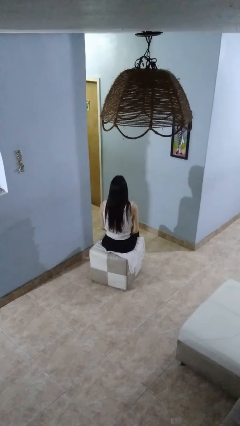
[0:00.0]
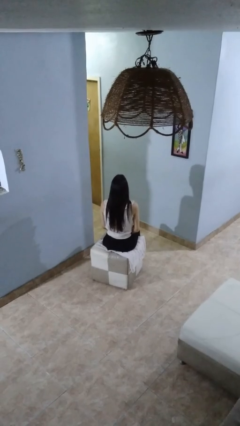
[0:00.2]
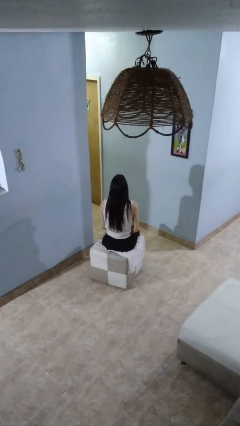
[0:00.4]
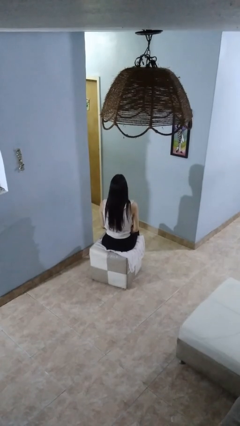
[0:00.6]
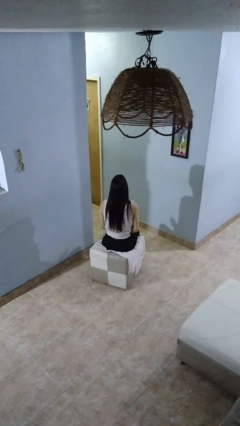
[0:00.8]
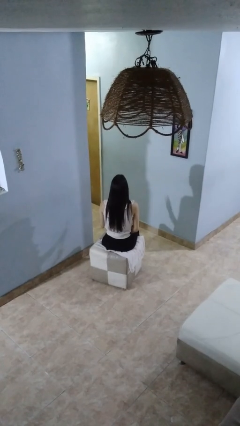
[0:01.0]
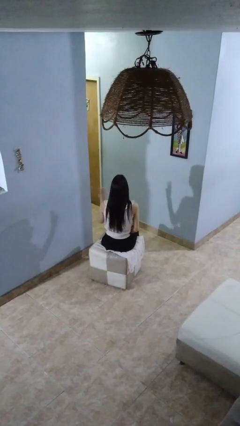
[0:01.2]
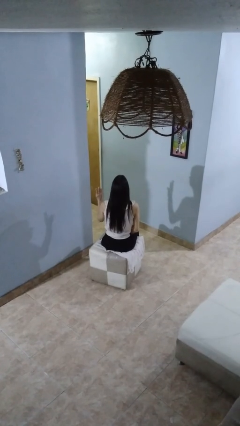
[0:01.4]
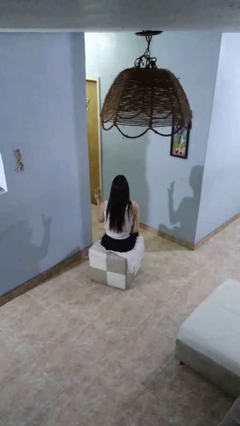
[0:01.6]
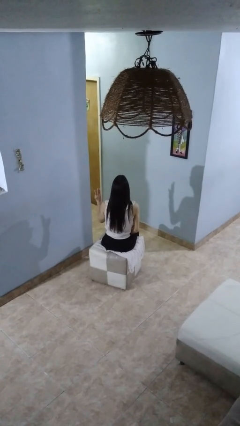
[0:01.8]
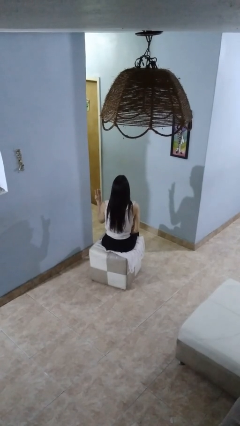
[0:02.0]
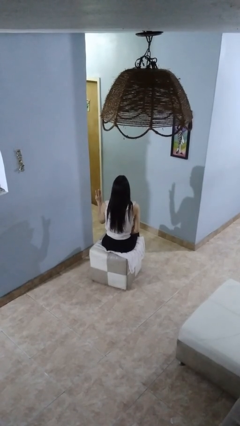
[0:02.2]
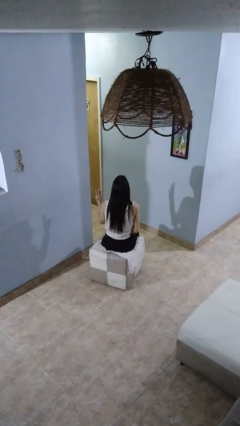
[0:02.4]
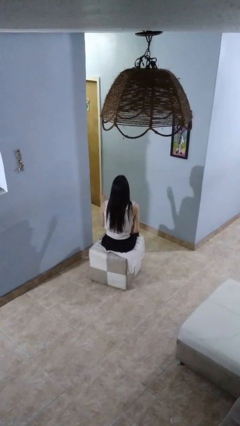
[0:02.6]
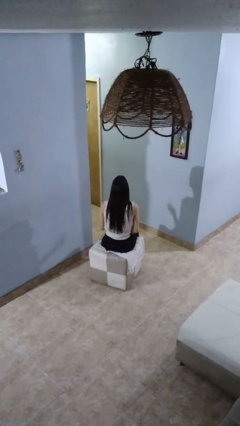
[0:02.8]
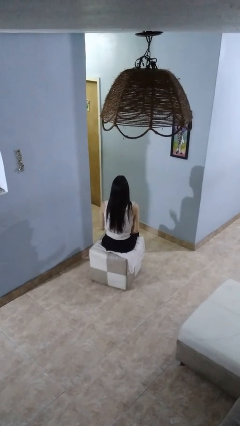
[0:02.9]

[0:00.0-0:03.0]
person gestures number three

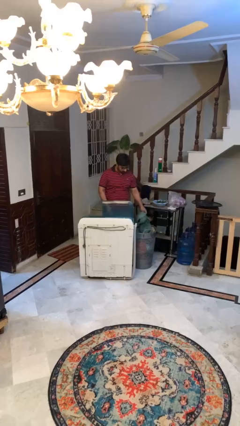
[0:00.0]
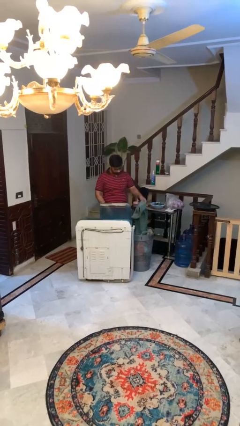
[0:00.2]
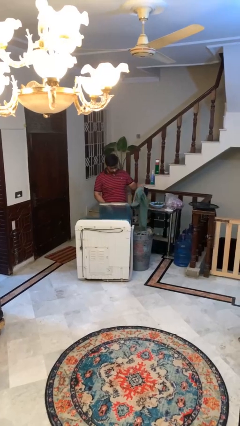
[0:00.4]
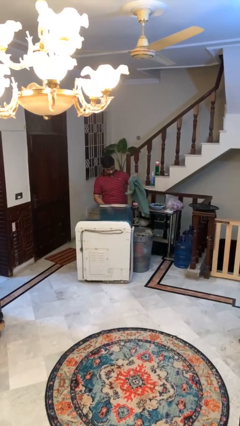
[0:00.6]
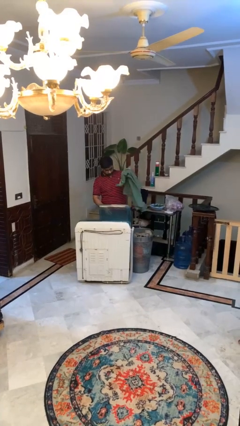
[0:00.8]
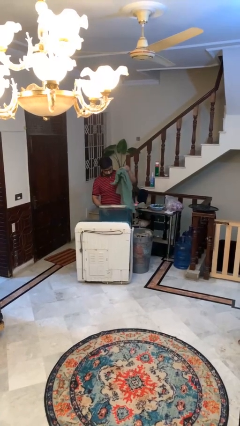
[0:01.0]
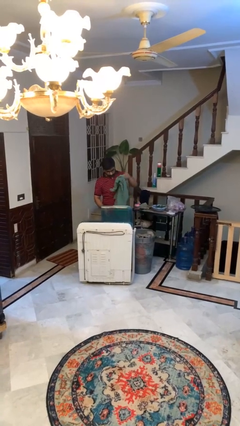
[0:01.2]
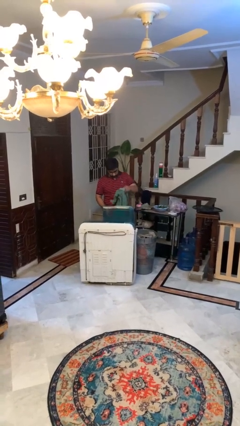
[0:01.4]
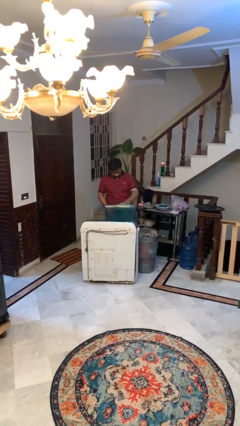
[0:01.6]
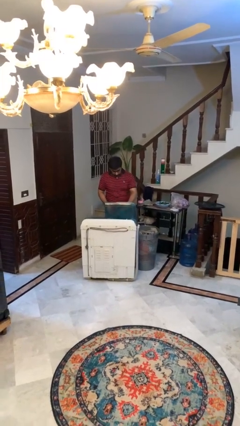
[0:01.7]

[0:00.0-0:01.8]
person loads clotheswasher

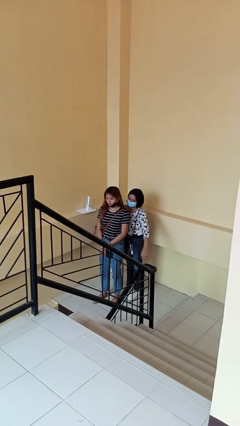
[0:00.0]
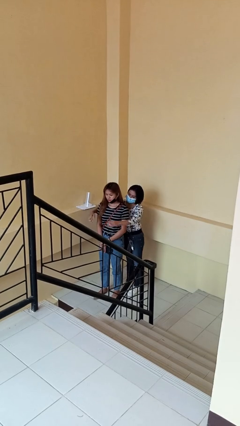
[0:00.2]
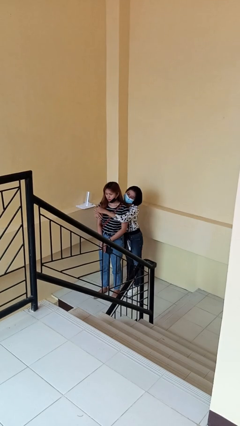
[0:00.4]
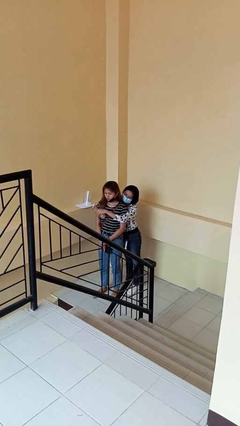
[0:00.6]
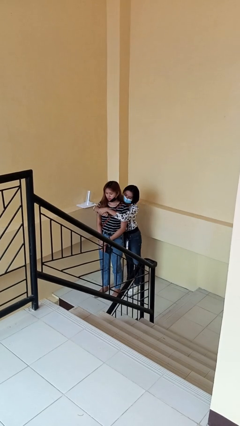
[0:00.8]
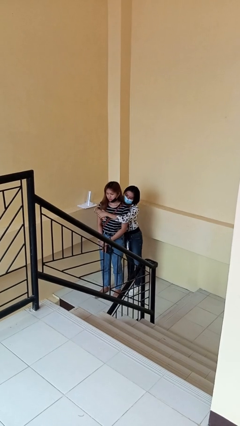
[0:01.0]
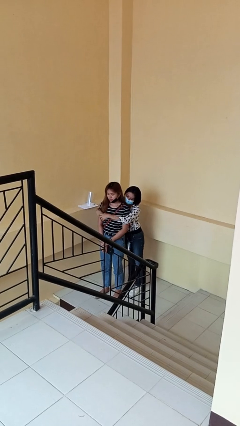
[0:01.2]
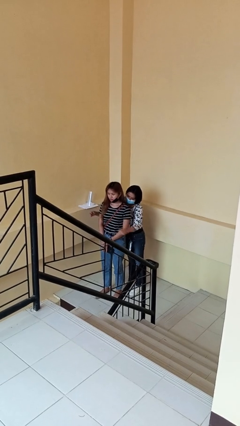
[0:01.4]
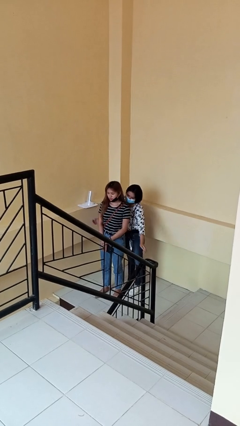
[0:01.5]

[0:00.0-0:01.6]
person hugs person from behind

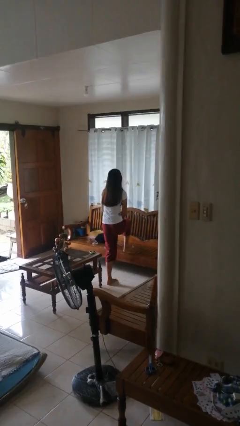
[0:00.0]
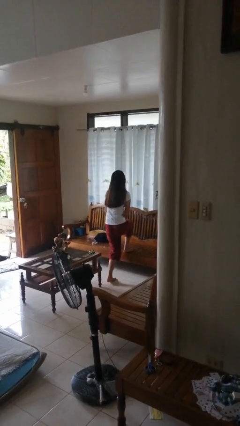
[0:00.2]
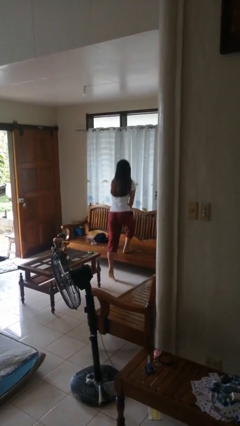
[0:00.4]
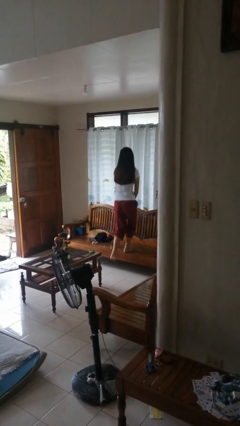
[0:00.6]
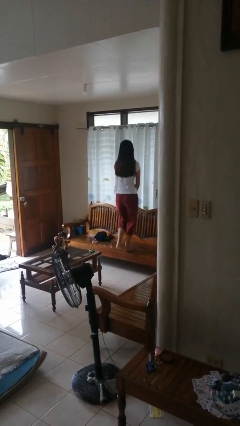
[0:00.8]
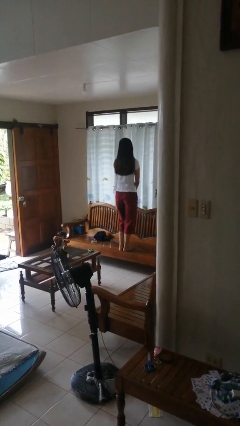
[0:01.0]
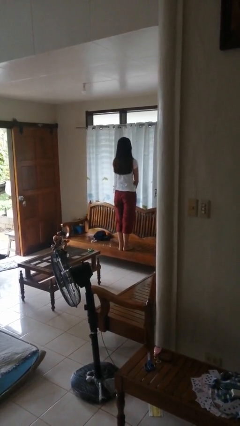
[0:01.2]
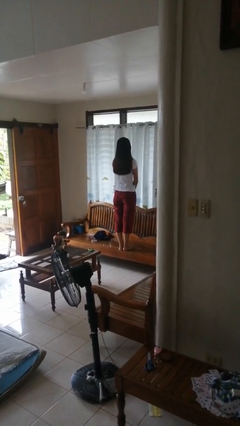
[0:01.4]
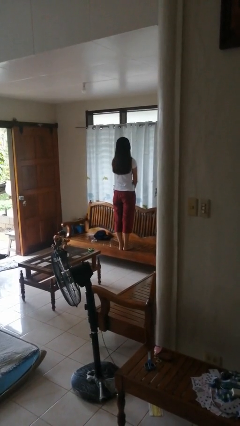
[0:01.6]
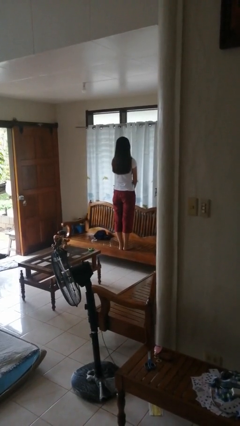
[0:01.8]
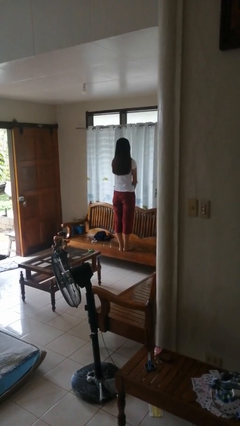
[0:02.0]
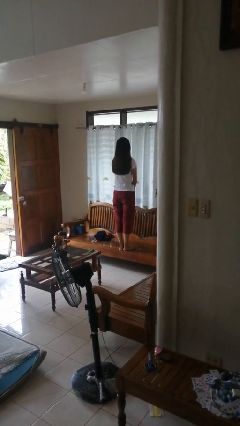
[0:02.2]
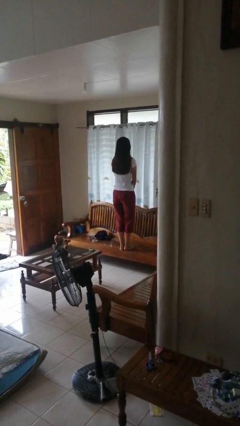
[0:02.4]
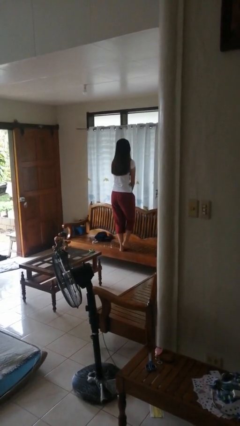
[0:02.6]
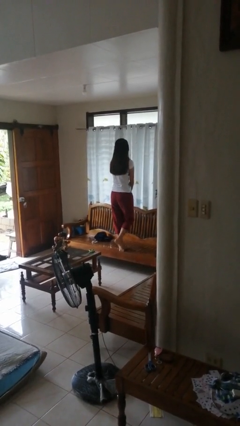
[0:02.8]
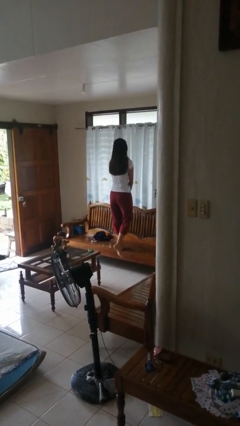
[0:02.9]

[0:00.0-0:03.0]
person climbs on chair

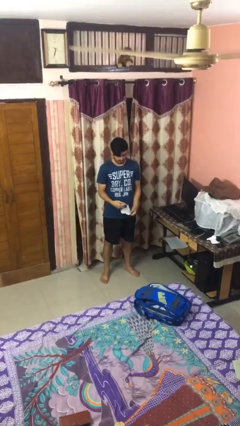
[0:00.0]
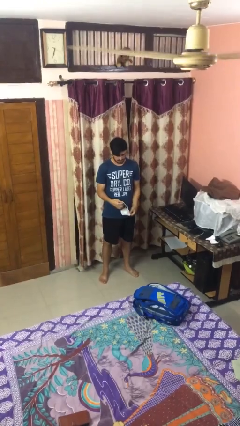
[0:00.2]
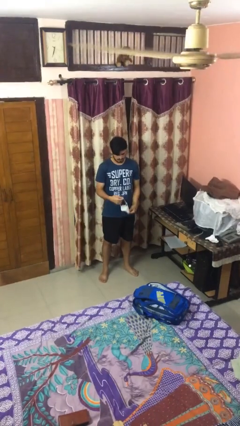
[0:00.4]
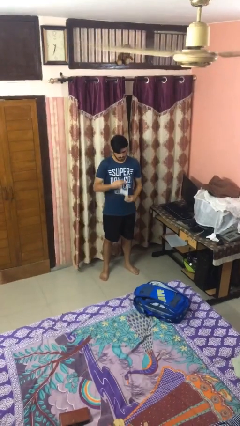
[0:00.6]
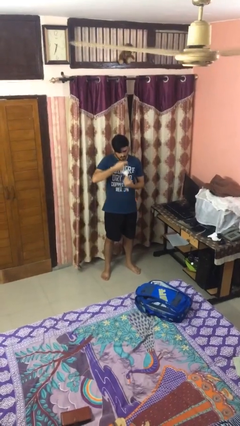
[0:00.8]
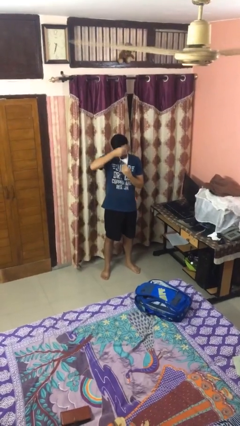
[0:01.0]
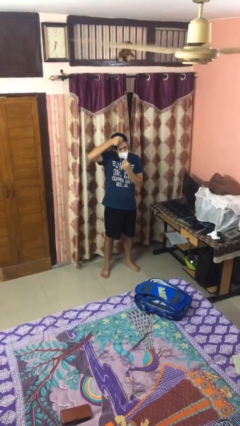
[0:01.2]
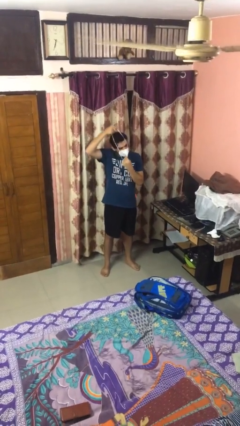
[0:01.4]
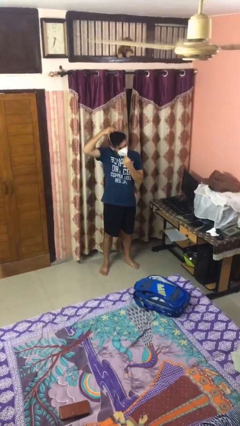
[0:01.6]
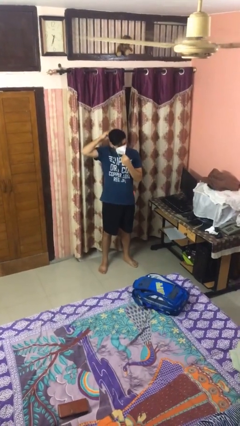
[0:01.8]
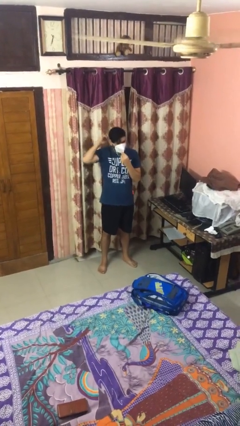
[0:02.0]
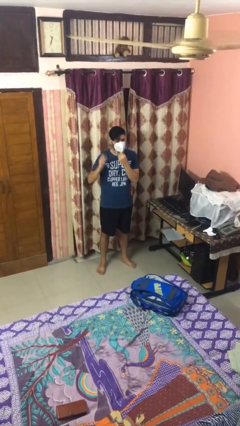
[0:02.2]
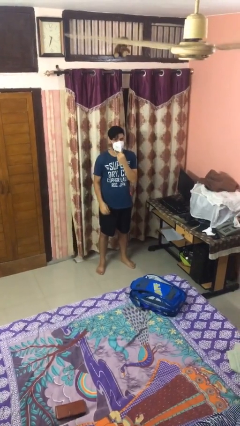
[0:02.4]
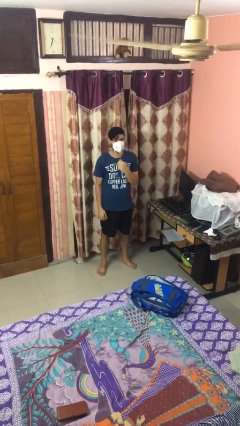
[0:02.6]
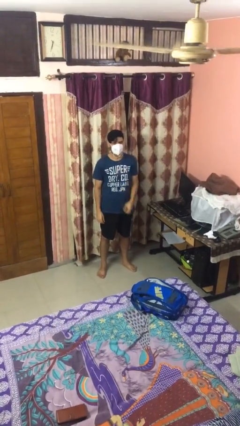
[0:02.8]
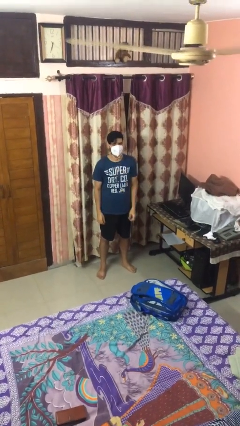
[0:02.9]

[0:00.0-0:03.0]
person puts on facemask

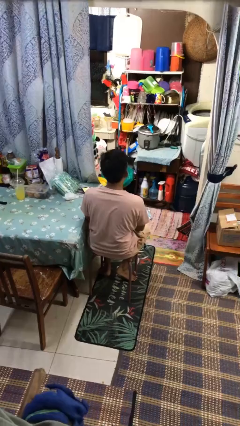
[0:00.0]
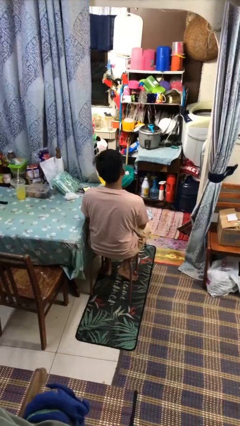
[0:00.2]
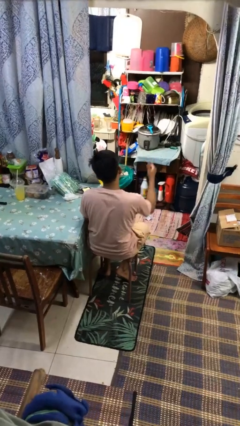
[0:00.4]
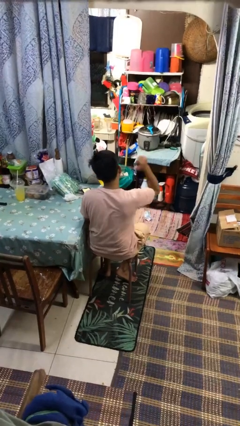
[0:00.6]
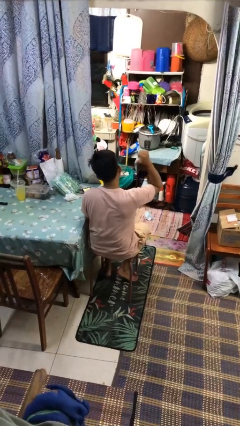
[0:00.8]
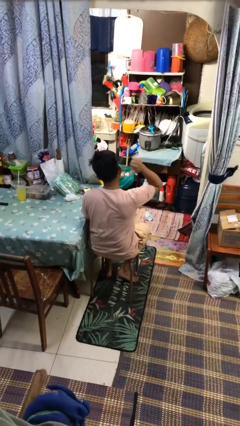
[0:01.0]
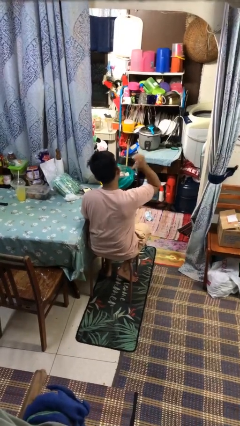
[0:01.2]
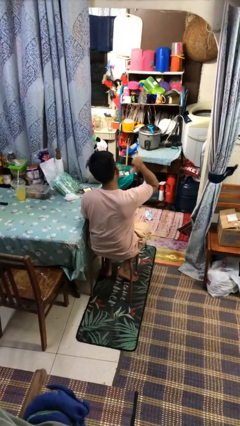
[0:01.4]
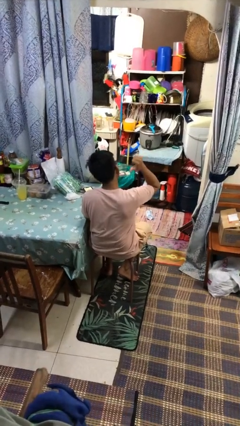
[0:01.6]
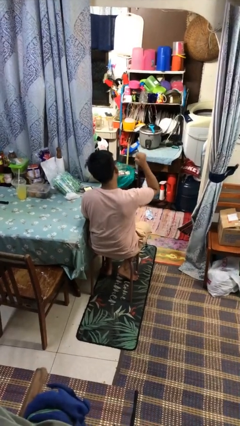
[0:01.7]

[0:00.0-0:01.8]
person gestures behind me

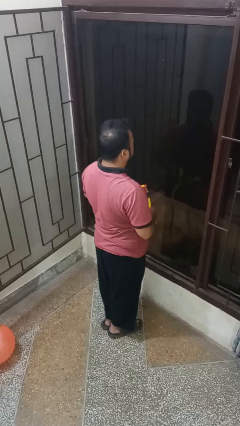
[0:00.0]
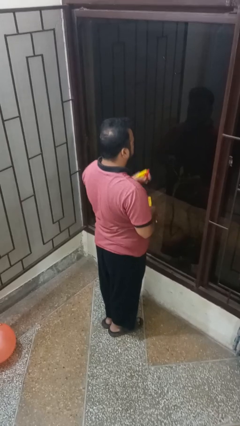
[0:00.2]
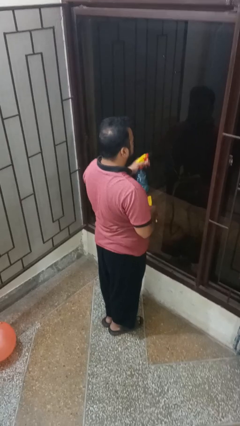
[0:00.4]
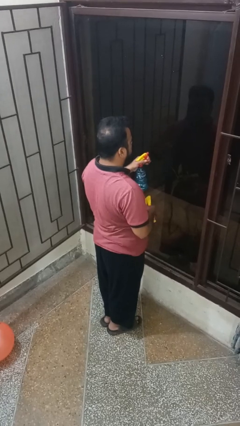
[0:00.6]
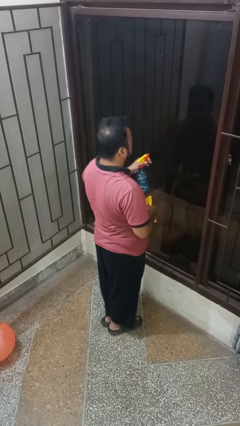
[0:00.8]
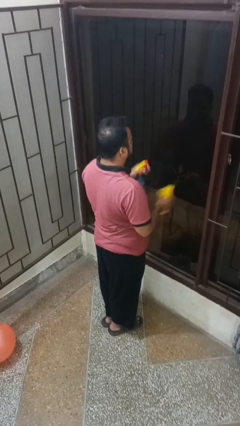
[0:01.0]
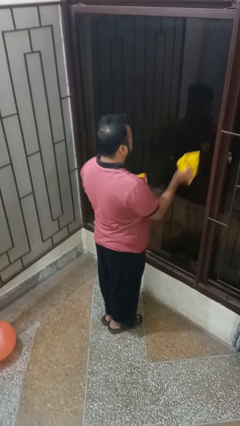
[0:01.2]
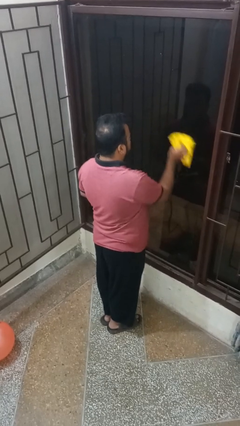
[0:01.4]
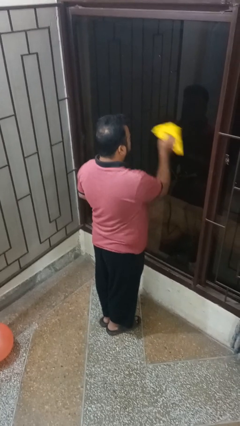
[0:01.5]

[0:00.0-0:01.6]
person sprays from bottle

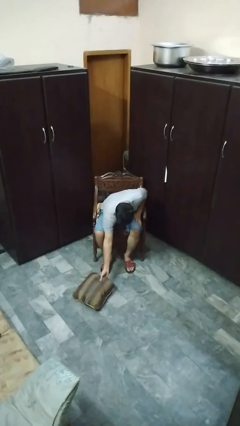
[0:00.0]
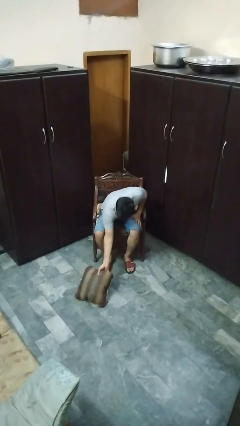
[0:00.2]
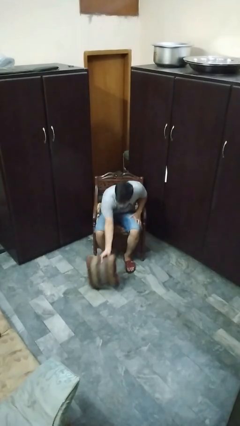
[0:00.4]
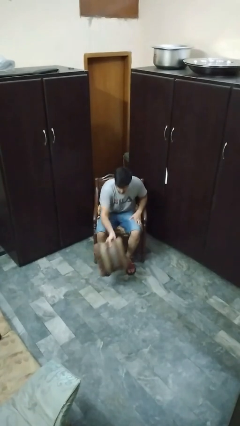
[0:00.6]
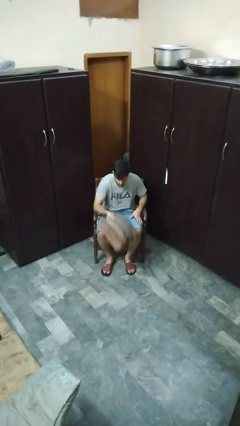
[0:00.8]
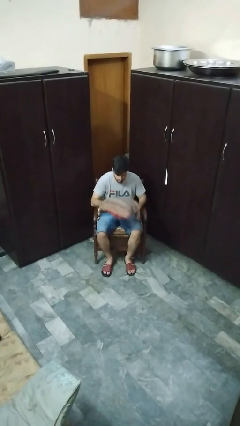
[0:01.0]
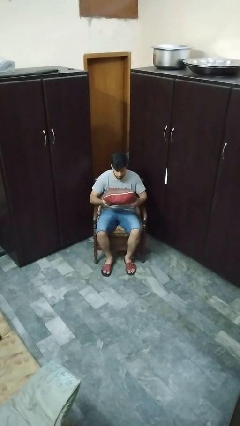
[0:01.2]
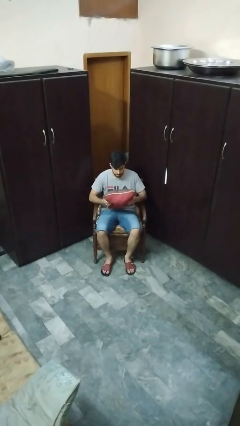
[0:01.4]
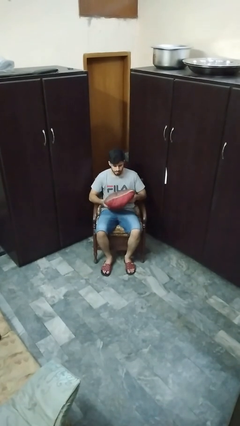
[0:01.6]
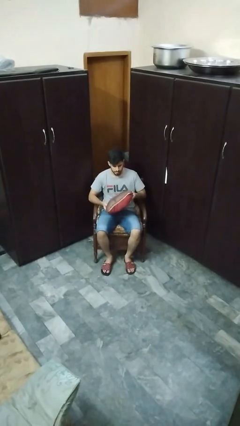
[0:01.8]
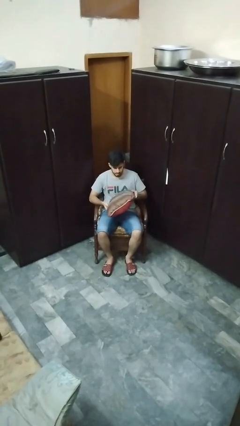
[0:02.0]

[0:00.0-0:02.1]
person picks up object from floor
